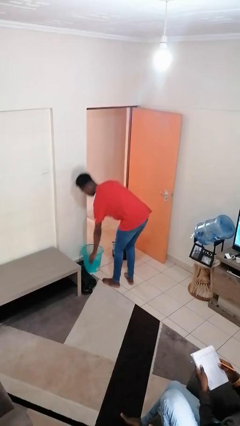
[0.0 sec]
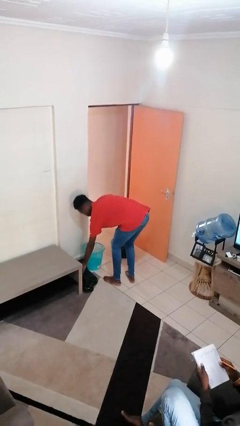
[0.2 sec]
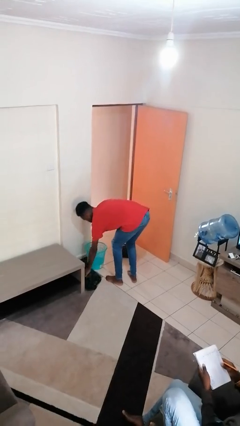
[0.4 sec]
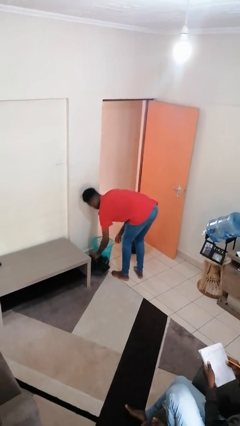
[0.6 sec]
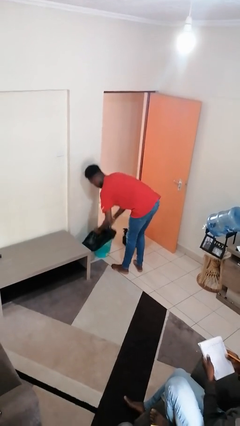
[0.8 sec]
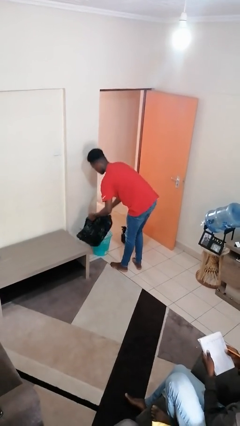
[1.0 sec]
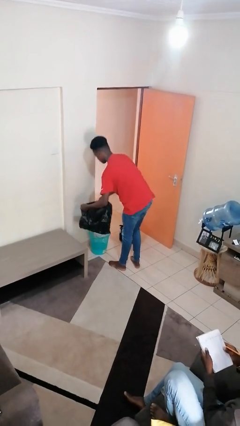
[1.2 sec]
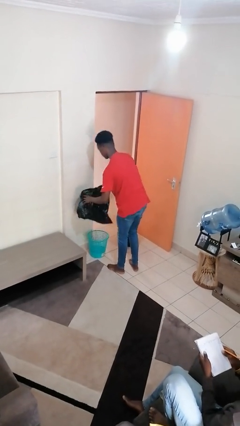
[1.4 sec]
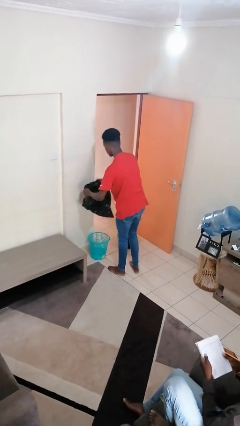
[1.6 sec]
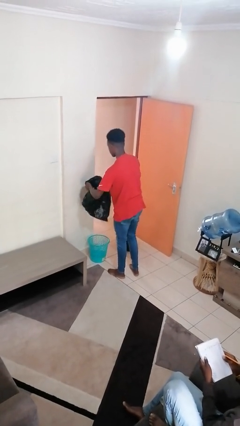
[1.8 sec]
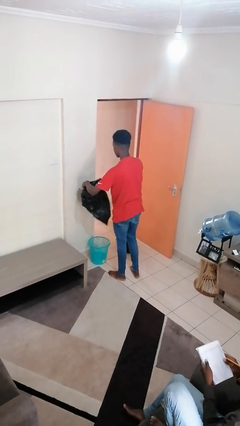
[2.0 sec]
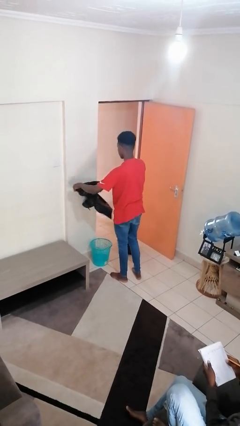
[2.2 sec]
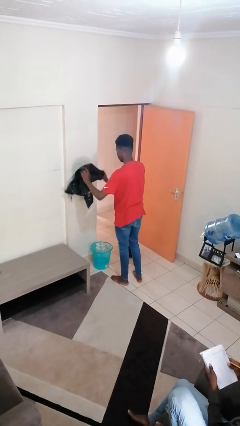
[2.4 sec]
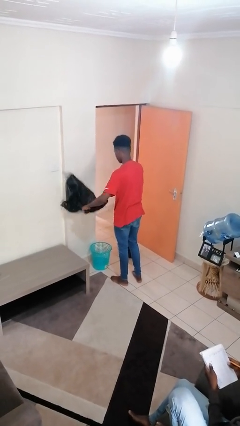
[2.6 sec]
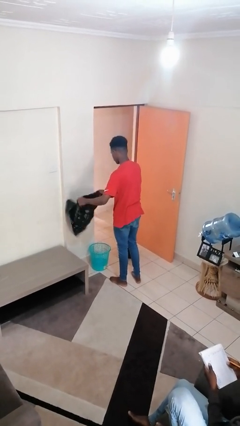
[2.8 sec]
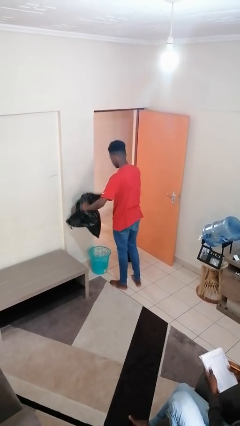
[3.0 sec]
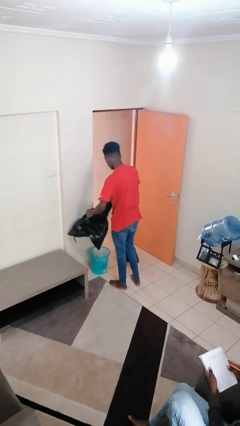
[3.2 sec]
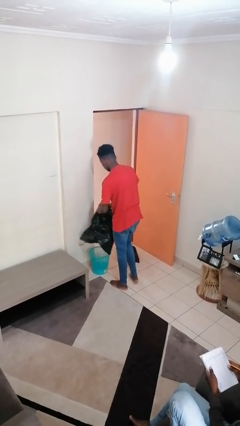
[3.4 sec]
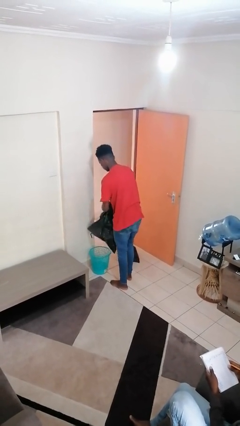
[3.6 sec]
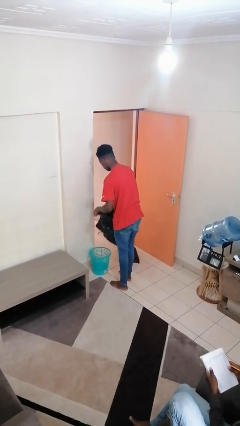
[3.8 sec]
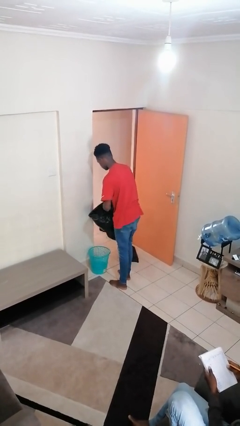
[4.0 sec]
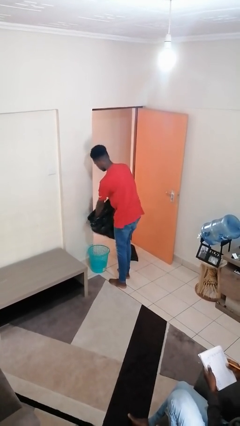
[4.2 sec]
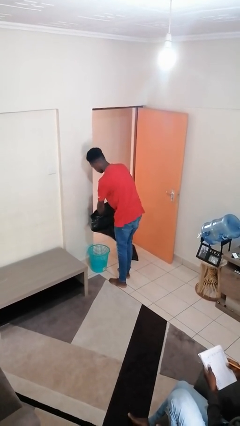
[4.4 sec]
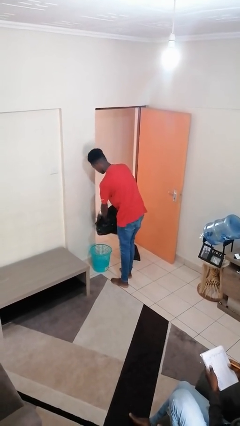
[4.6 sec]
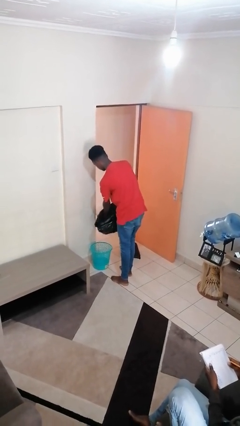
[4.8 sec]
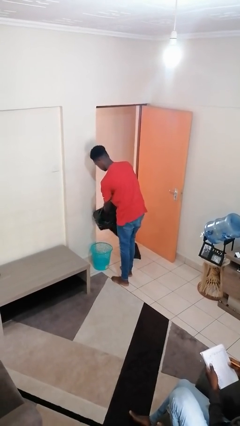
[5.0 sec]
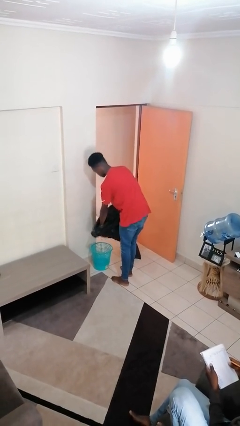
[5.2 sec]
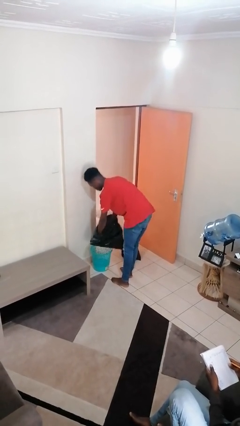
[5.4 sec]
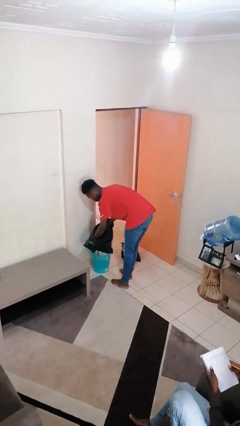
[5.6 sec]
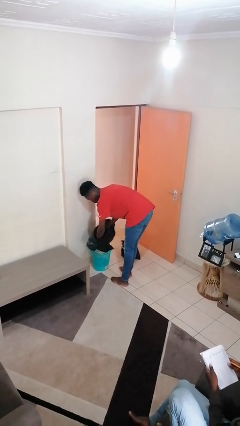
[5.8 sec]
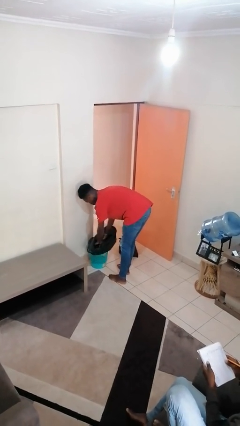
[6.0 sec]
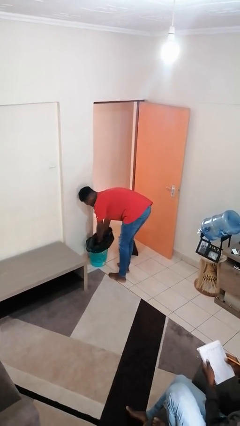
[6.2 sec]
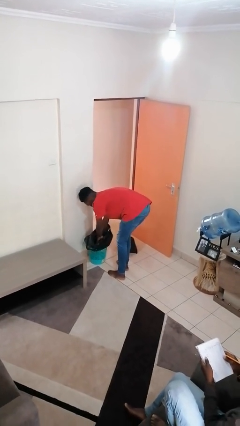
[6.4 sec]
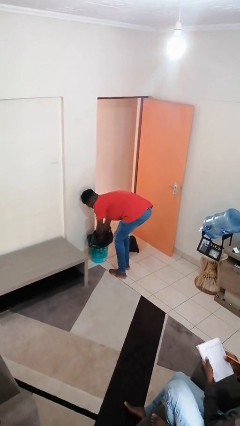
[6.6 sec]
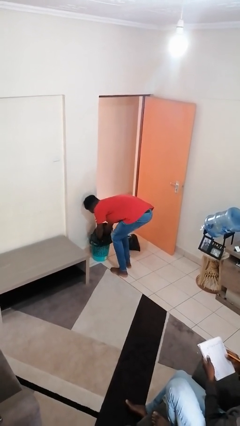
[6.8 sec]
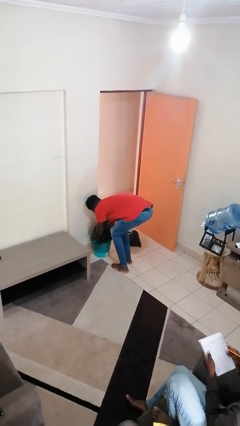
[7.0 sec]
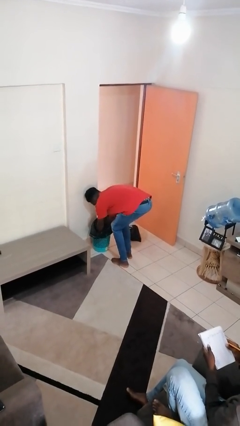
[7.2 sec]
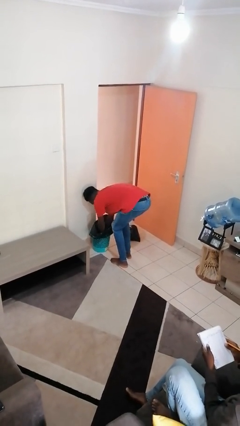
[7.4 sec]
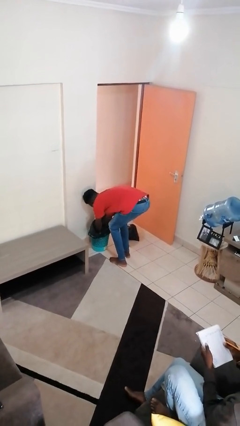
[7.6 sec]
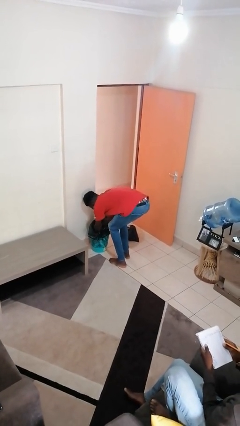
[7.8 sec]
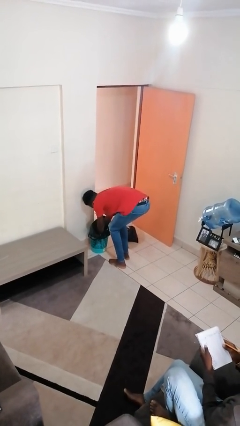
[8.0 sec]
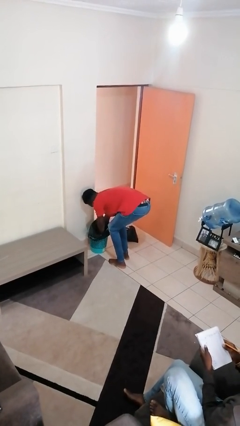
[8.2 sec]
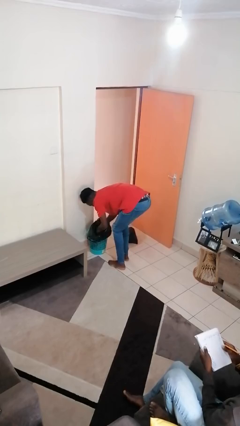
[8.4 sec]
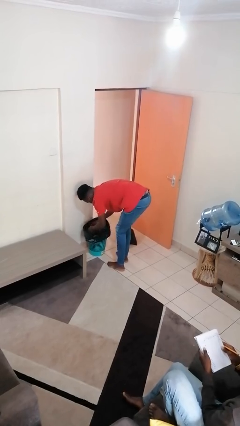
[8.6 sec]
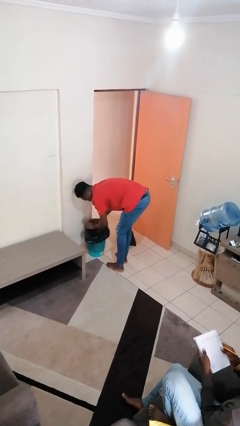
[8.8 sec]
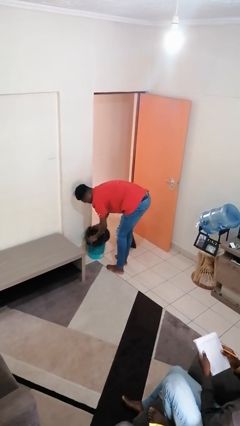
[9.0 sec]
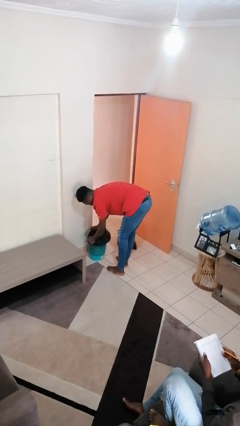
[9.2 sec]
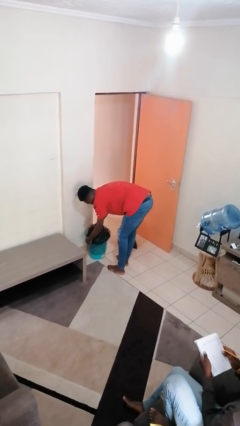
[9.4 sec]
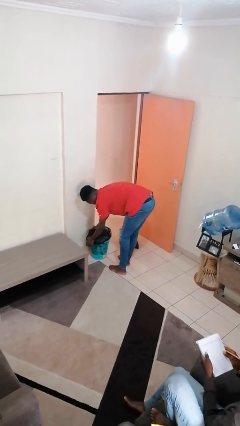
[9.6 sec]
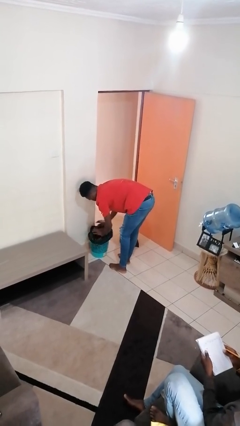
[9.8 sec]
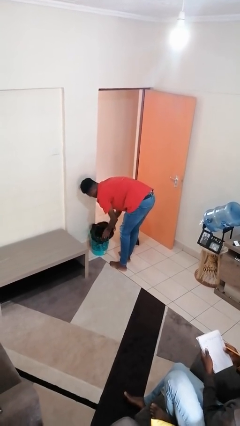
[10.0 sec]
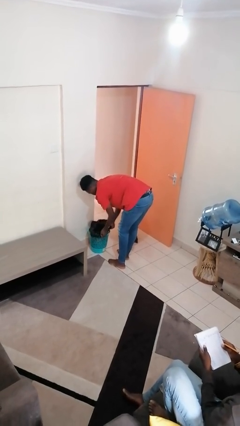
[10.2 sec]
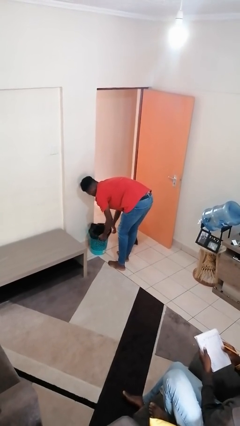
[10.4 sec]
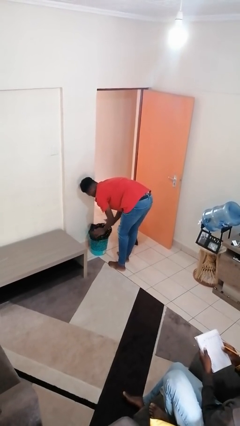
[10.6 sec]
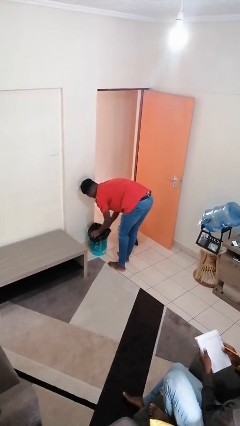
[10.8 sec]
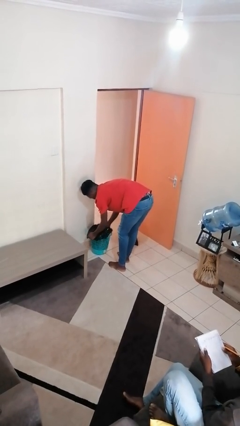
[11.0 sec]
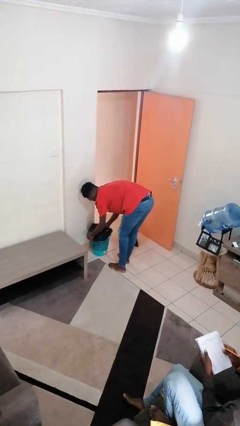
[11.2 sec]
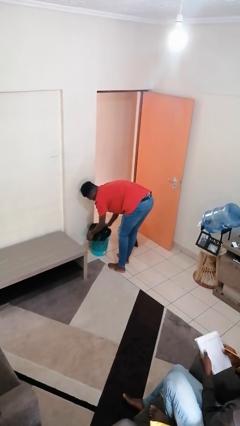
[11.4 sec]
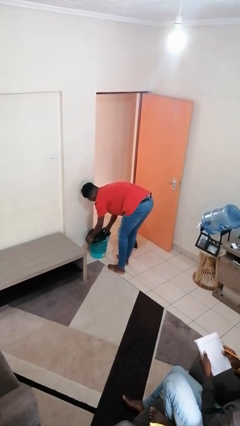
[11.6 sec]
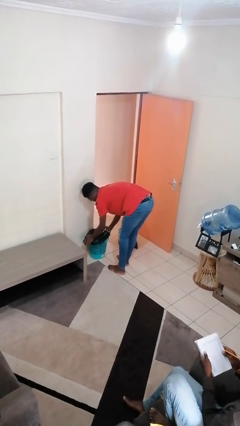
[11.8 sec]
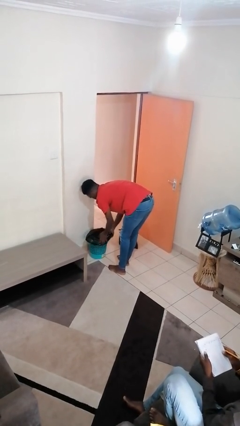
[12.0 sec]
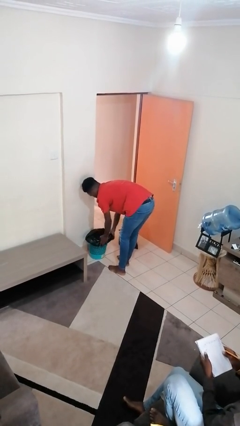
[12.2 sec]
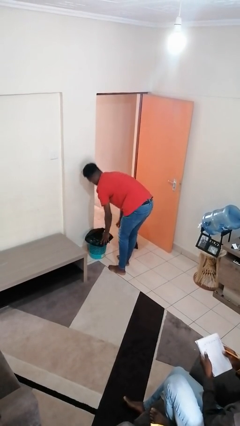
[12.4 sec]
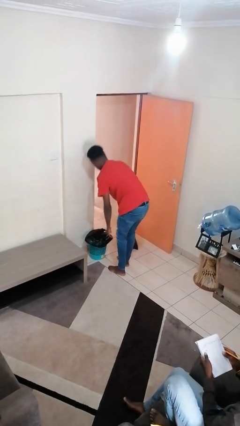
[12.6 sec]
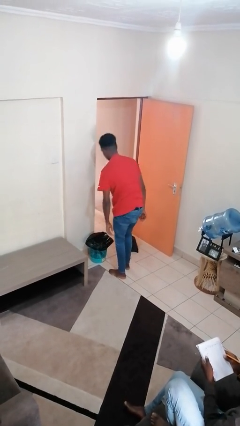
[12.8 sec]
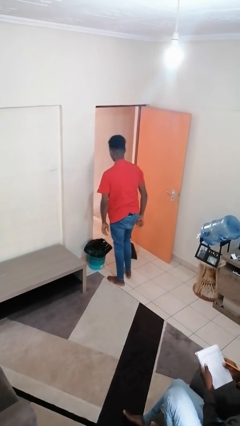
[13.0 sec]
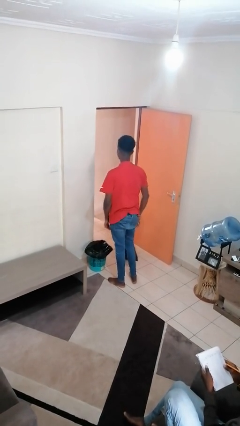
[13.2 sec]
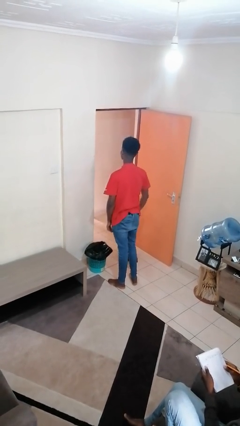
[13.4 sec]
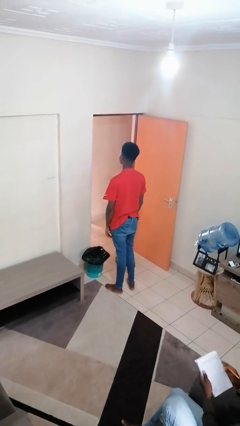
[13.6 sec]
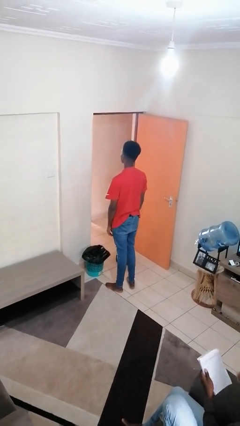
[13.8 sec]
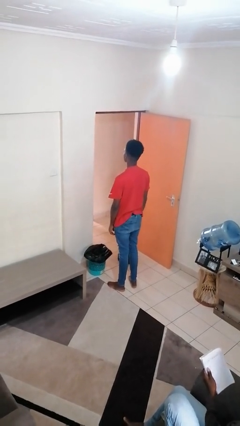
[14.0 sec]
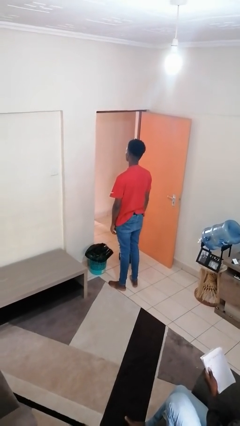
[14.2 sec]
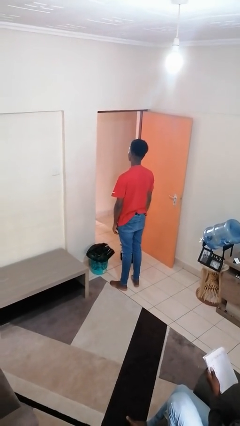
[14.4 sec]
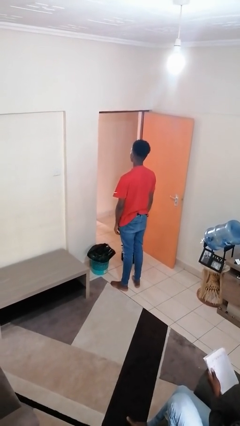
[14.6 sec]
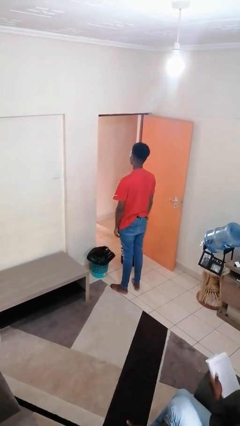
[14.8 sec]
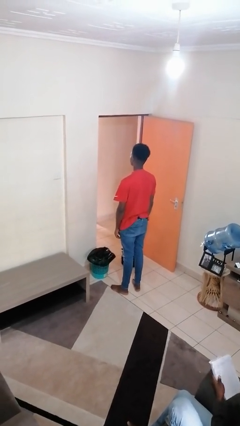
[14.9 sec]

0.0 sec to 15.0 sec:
person inserts trashbag into trashcan

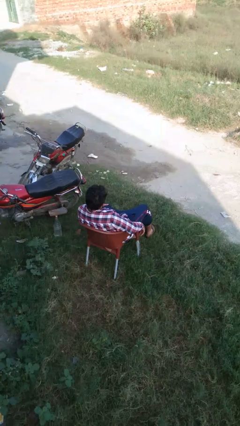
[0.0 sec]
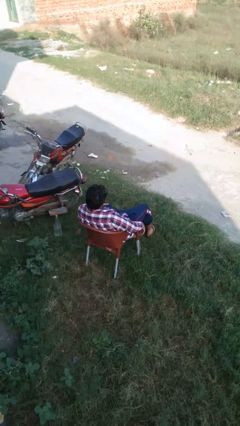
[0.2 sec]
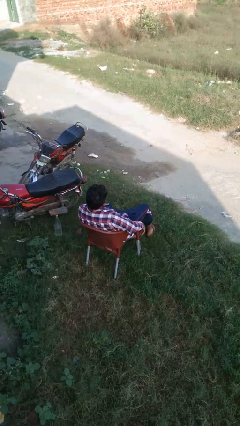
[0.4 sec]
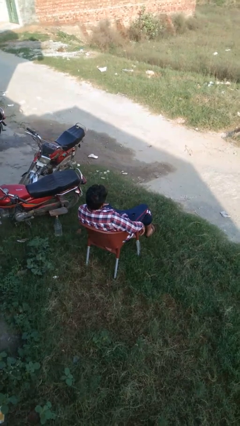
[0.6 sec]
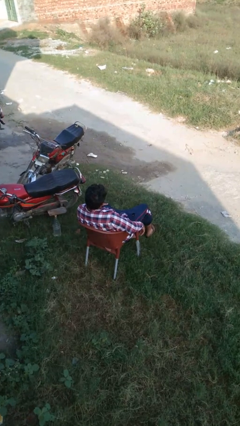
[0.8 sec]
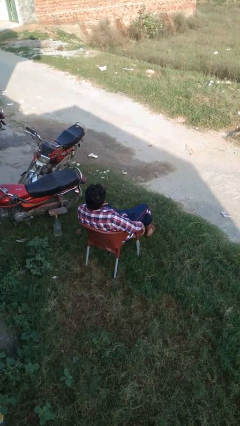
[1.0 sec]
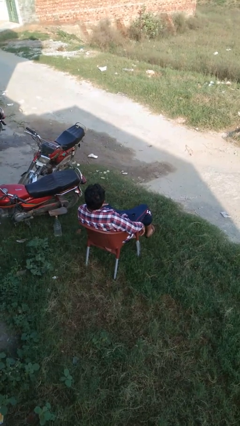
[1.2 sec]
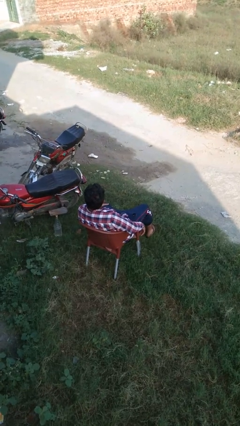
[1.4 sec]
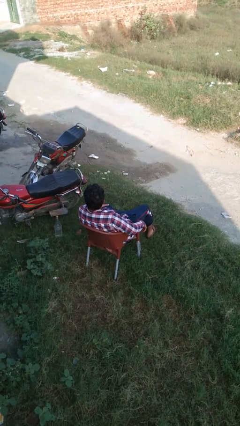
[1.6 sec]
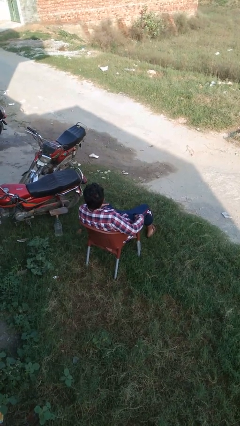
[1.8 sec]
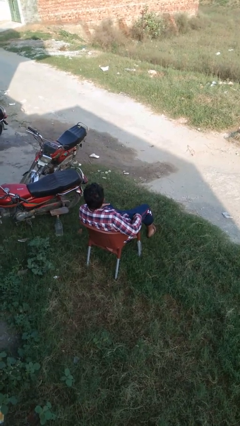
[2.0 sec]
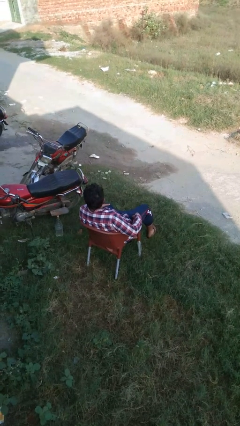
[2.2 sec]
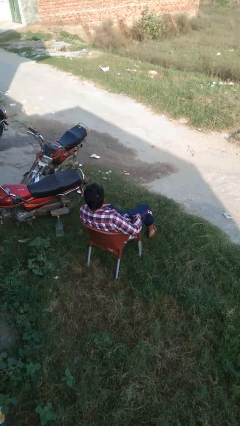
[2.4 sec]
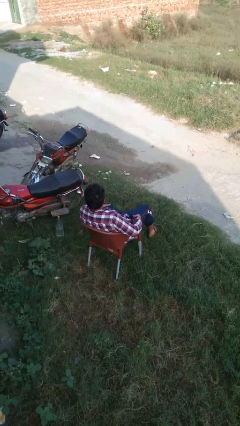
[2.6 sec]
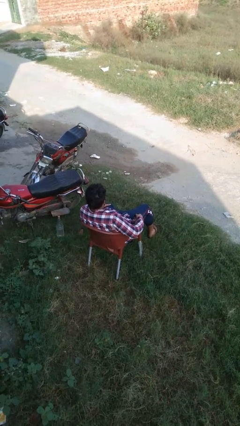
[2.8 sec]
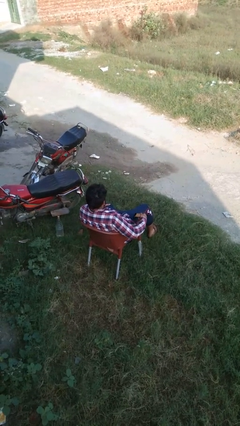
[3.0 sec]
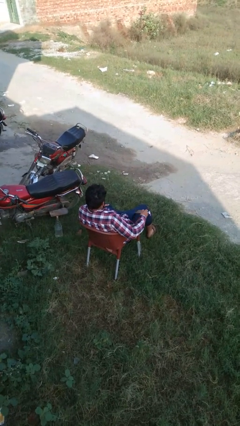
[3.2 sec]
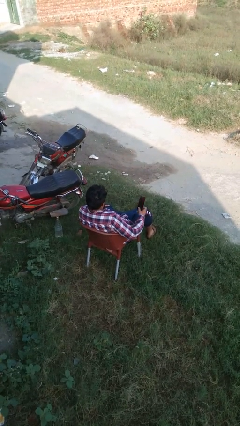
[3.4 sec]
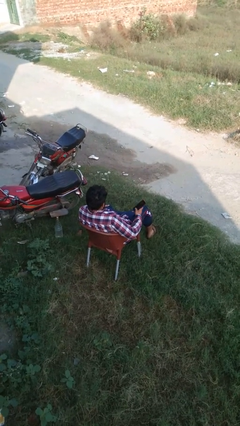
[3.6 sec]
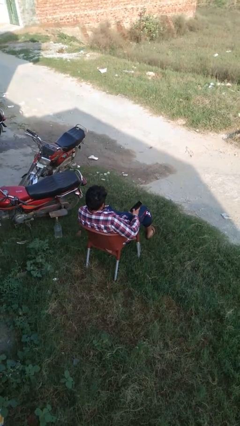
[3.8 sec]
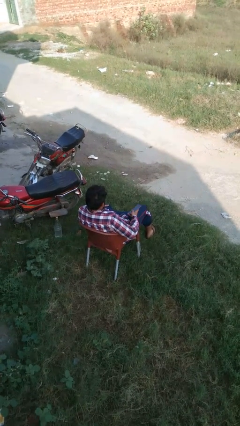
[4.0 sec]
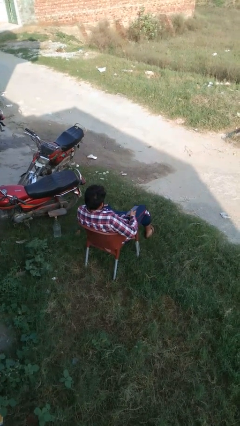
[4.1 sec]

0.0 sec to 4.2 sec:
person takes phone from pocket
